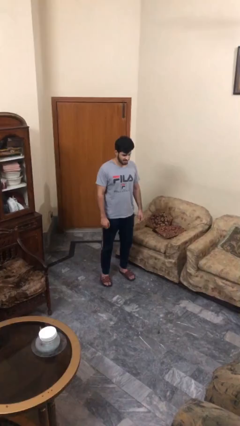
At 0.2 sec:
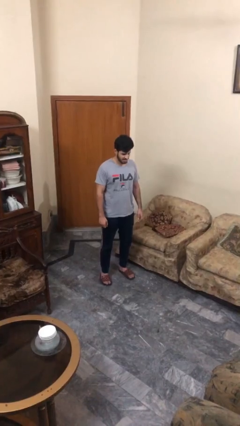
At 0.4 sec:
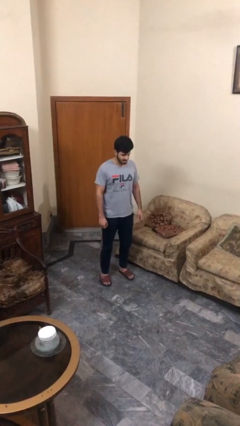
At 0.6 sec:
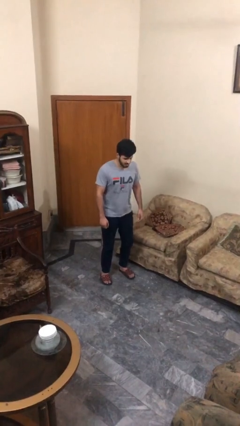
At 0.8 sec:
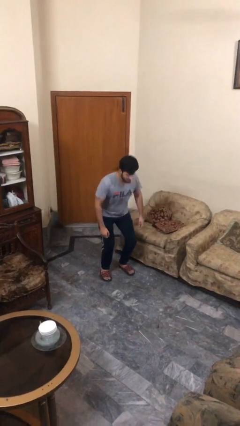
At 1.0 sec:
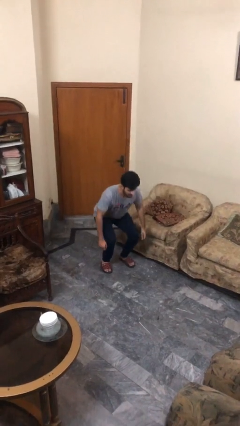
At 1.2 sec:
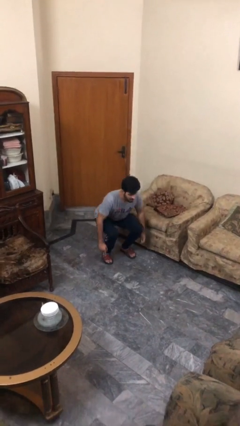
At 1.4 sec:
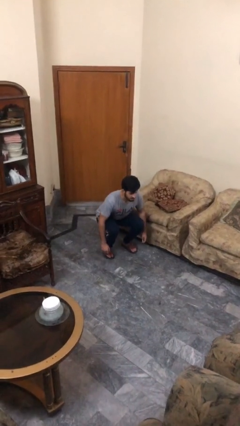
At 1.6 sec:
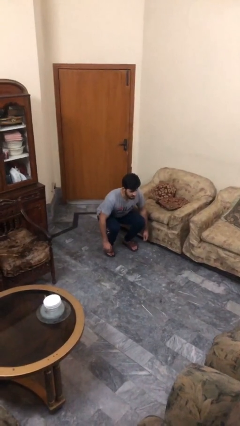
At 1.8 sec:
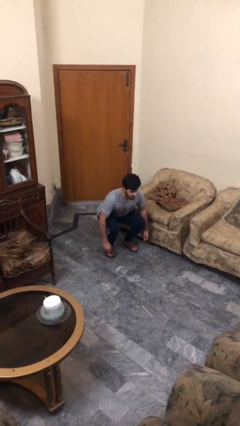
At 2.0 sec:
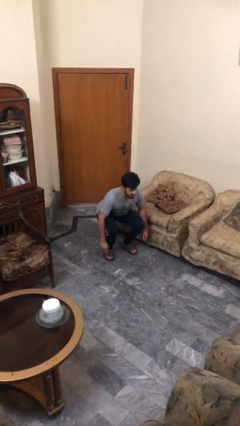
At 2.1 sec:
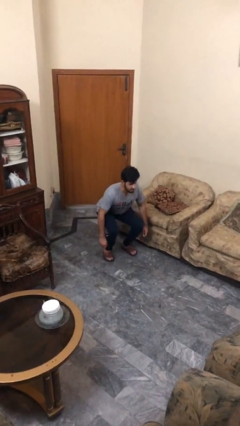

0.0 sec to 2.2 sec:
person squats

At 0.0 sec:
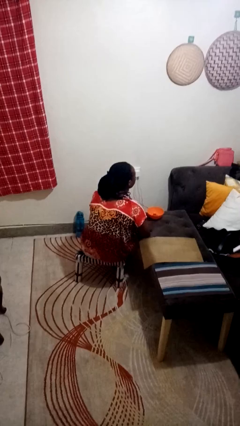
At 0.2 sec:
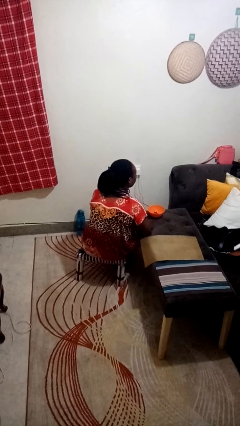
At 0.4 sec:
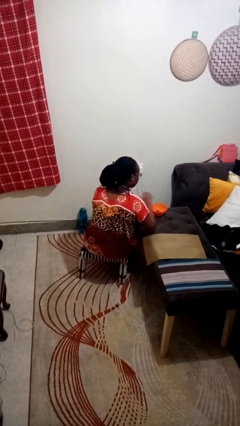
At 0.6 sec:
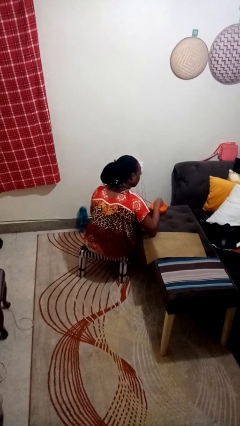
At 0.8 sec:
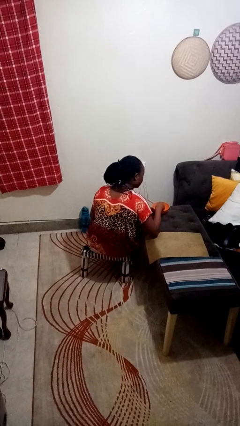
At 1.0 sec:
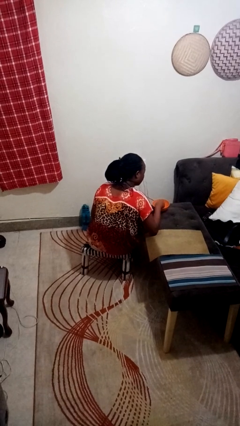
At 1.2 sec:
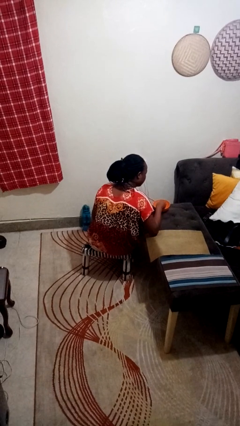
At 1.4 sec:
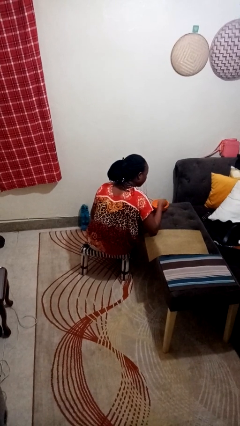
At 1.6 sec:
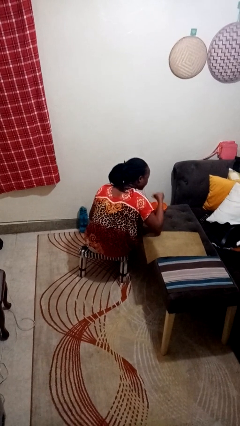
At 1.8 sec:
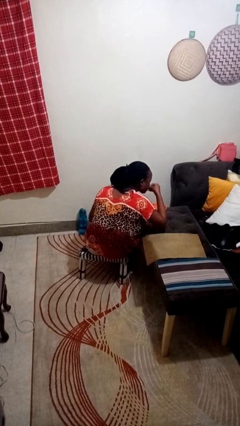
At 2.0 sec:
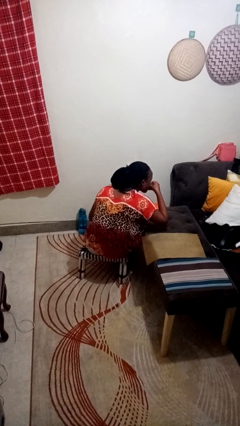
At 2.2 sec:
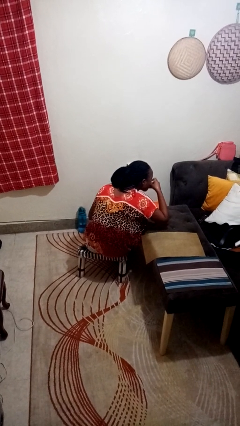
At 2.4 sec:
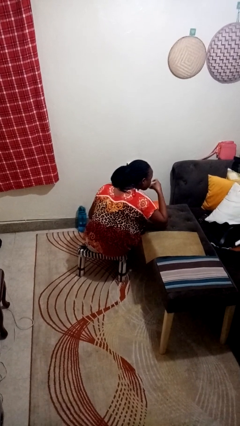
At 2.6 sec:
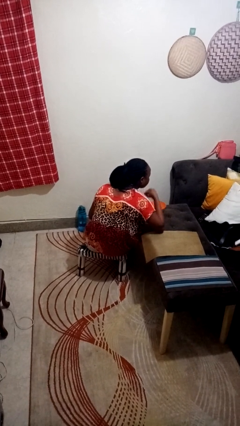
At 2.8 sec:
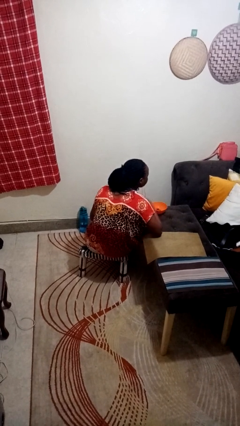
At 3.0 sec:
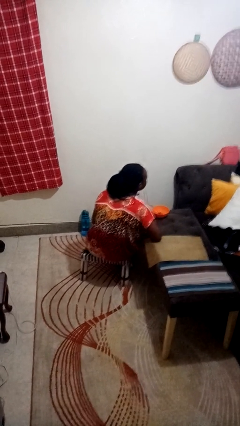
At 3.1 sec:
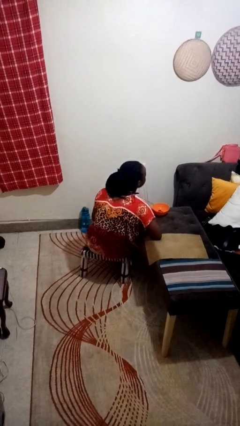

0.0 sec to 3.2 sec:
person eats with hands

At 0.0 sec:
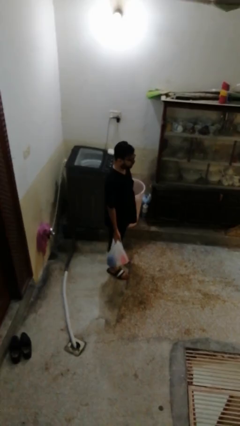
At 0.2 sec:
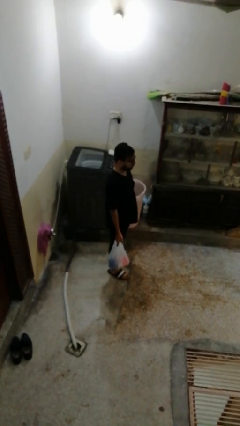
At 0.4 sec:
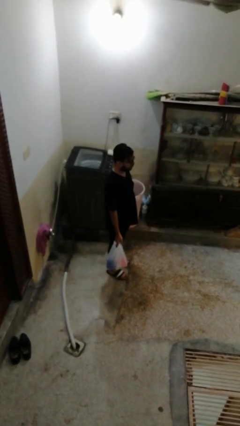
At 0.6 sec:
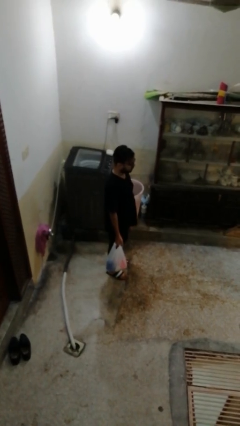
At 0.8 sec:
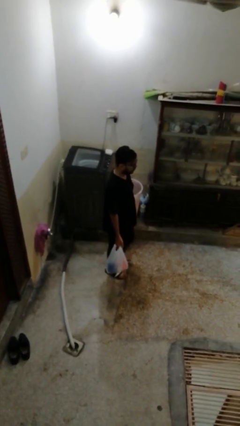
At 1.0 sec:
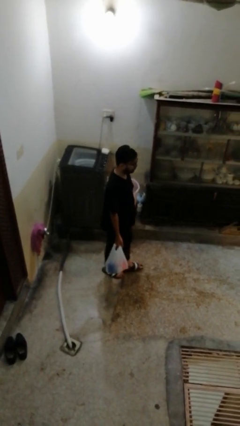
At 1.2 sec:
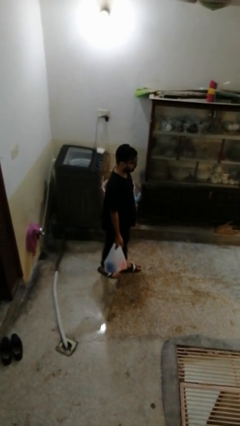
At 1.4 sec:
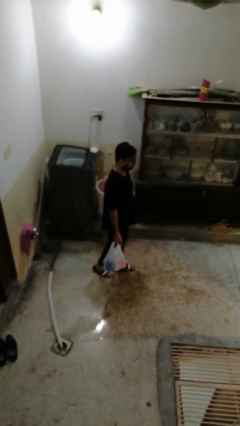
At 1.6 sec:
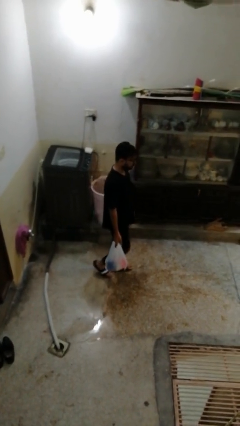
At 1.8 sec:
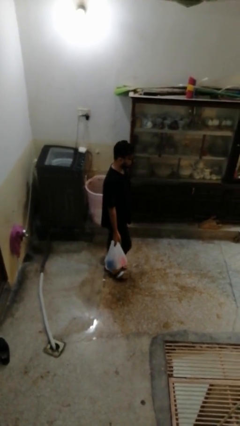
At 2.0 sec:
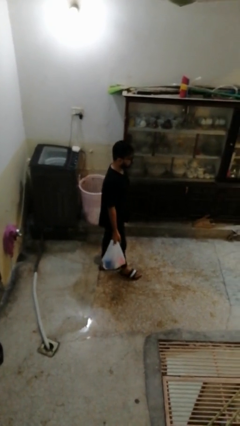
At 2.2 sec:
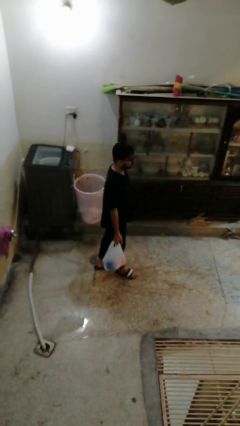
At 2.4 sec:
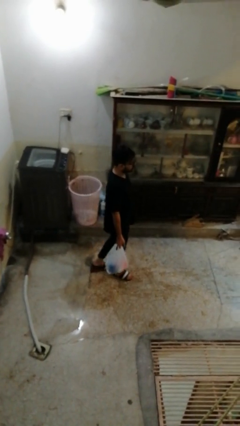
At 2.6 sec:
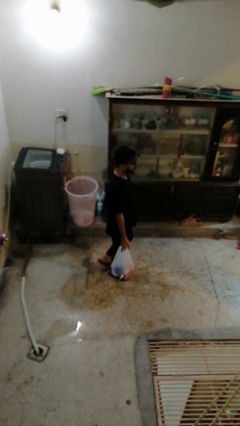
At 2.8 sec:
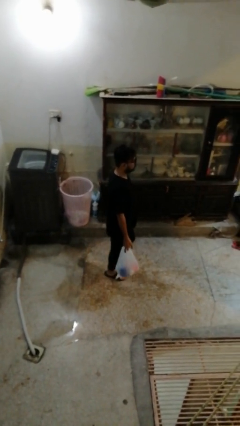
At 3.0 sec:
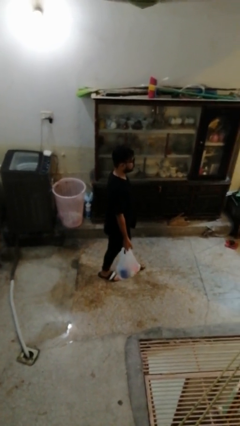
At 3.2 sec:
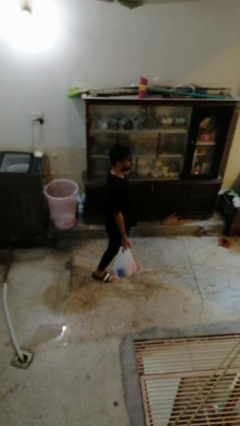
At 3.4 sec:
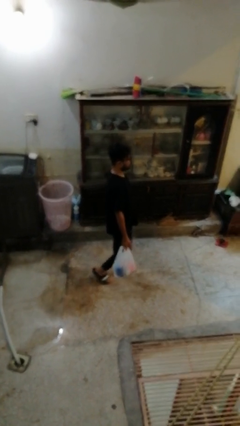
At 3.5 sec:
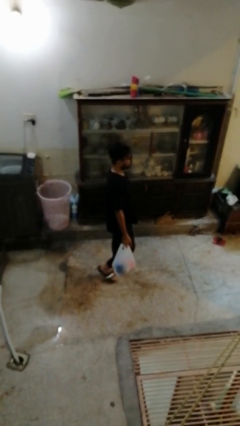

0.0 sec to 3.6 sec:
person carries groceries

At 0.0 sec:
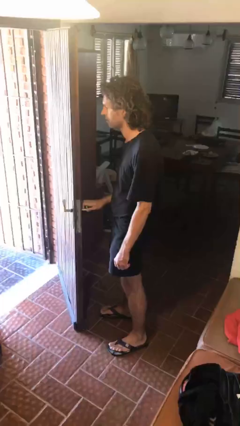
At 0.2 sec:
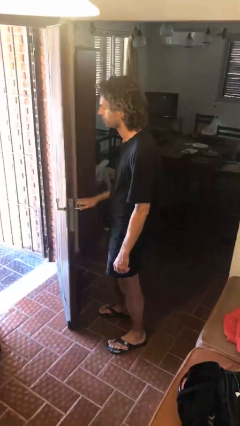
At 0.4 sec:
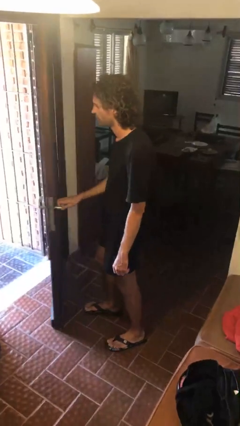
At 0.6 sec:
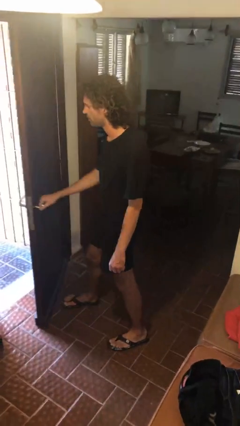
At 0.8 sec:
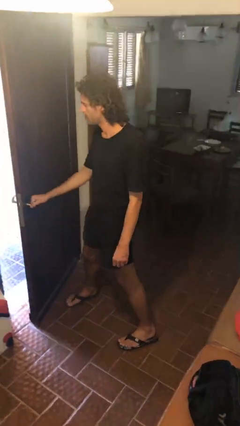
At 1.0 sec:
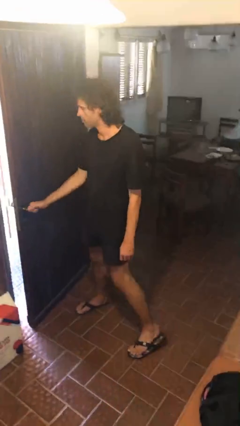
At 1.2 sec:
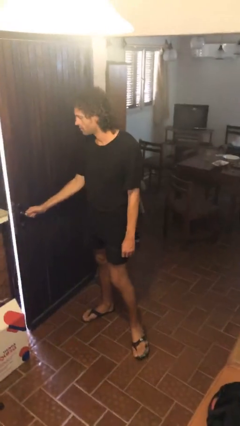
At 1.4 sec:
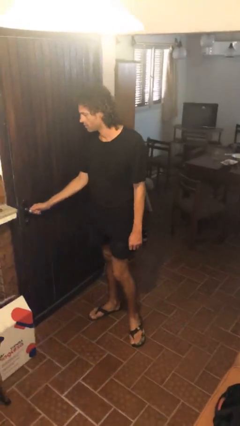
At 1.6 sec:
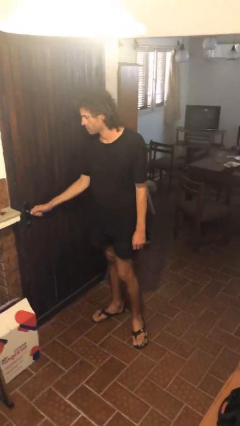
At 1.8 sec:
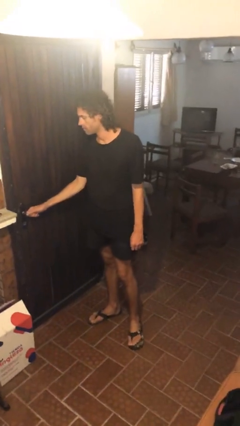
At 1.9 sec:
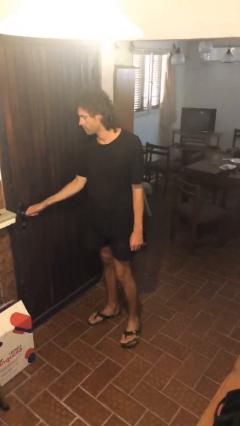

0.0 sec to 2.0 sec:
person closes facility door

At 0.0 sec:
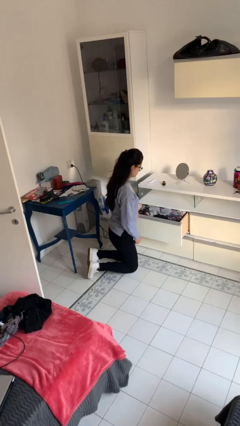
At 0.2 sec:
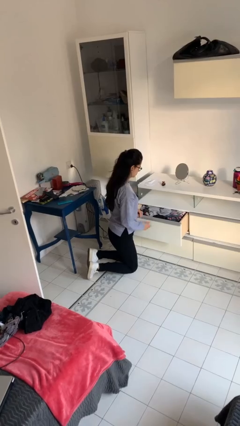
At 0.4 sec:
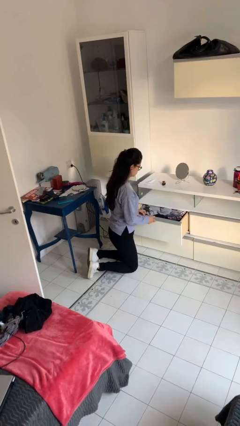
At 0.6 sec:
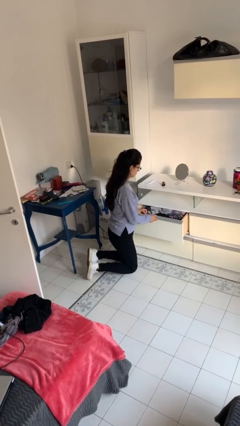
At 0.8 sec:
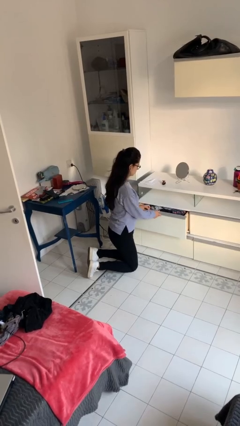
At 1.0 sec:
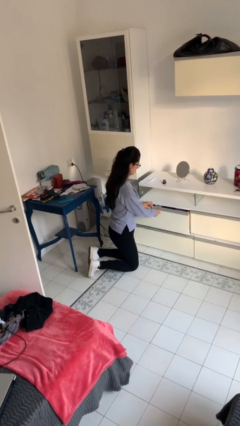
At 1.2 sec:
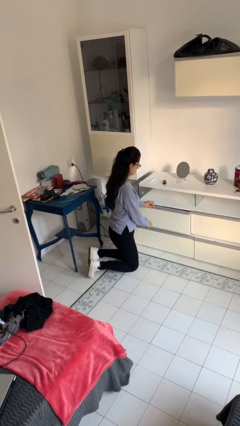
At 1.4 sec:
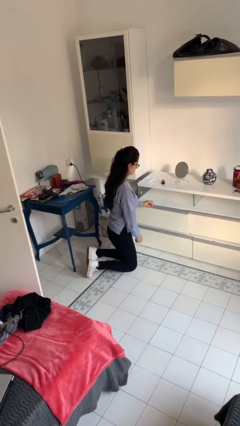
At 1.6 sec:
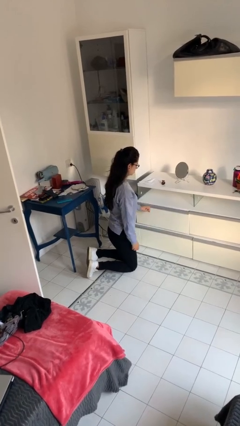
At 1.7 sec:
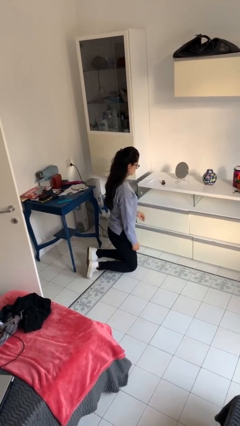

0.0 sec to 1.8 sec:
person closes dresser drawer

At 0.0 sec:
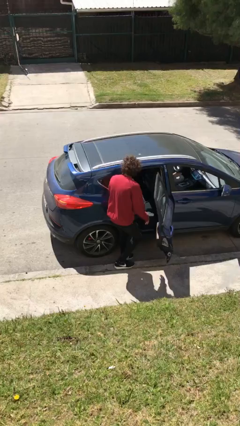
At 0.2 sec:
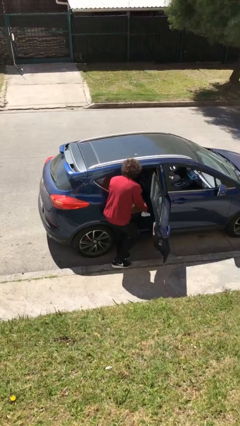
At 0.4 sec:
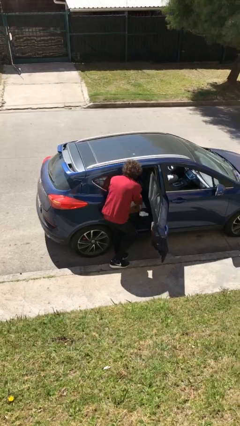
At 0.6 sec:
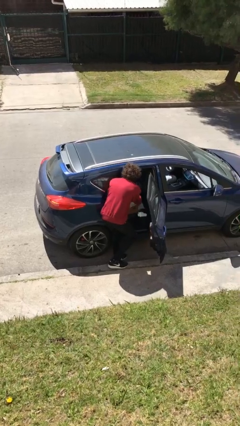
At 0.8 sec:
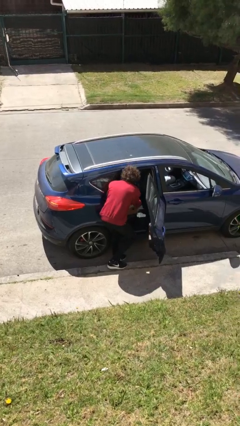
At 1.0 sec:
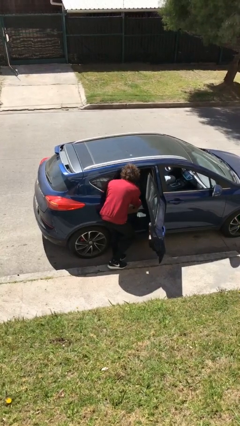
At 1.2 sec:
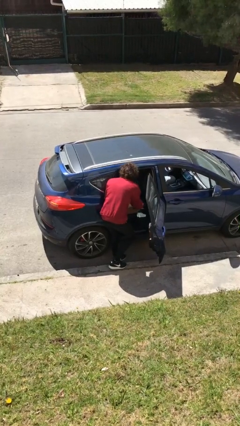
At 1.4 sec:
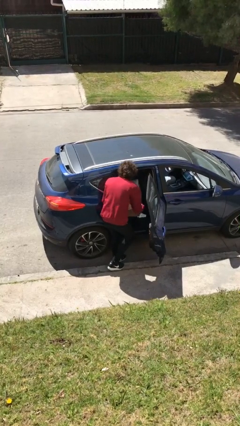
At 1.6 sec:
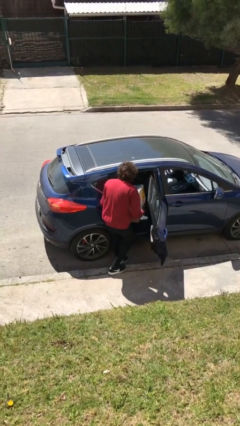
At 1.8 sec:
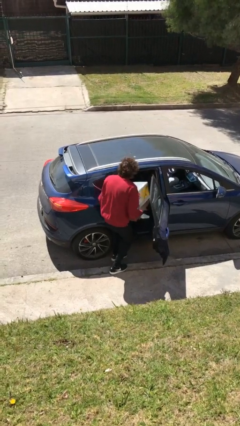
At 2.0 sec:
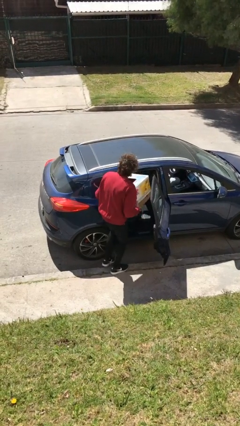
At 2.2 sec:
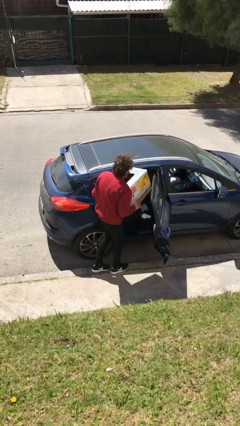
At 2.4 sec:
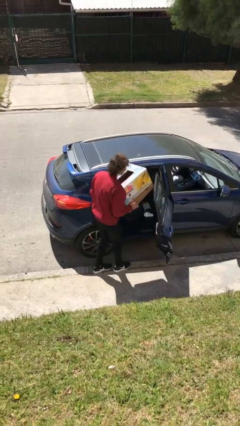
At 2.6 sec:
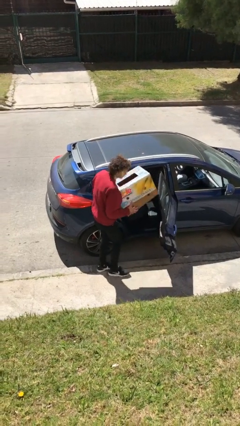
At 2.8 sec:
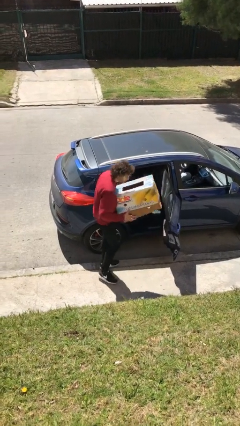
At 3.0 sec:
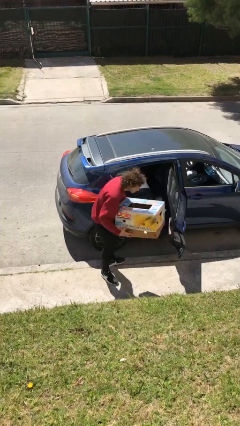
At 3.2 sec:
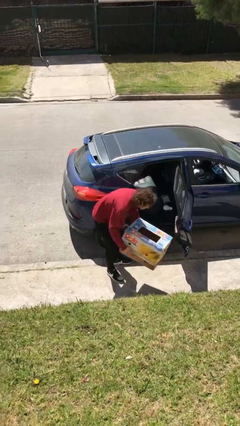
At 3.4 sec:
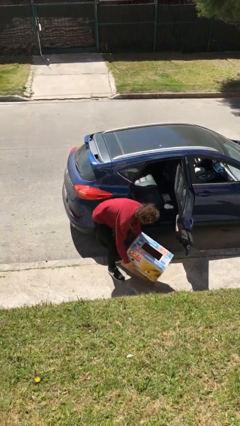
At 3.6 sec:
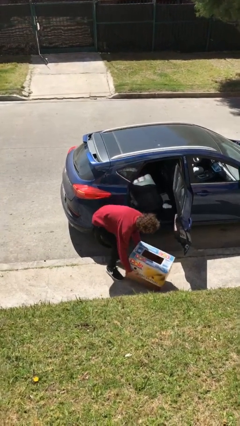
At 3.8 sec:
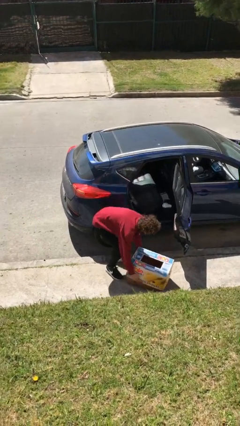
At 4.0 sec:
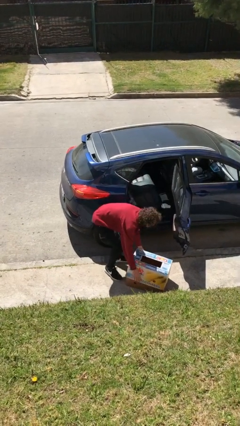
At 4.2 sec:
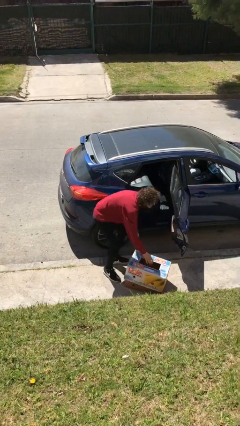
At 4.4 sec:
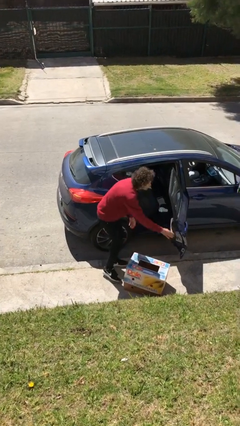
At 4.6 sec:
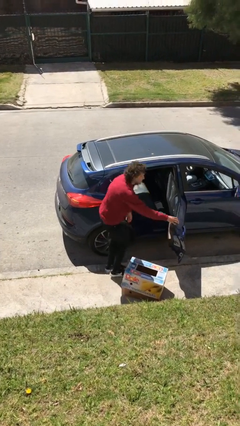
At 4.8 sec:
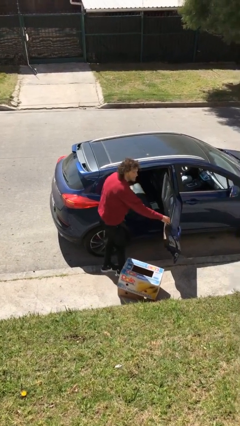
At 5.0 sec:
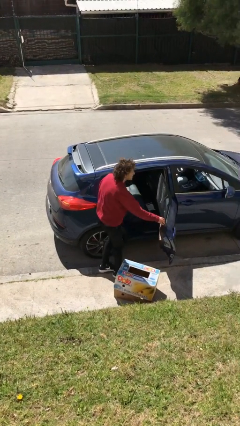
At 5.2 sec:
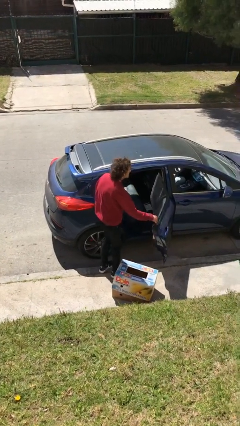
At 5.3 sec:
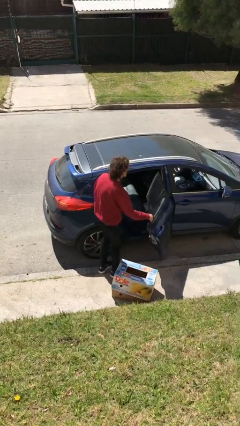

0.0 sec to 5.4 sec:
person unloads car
